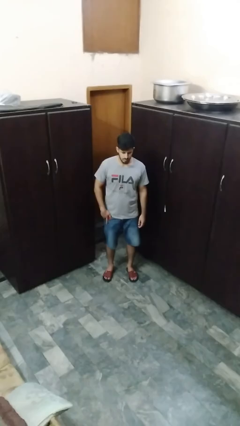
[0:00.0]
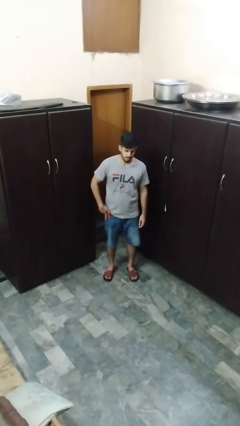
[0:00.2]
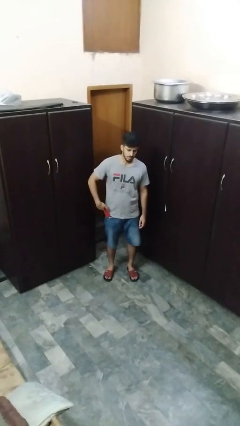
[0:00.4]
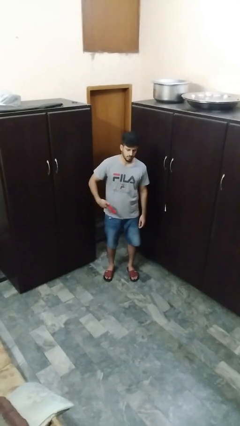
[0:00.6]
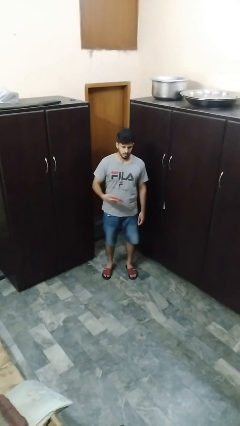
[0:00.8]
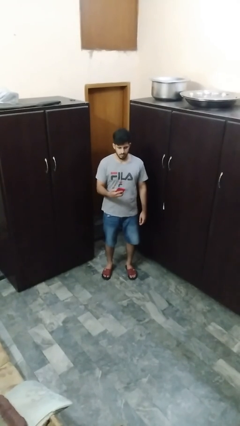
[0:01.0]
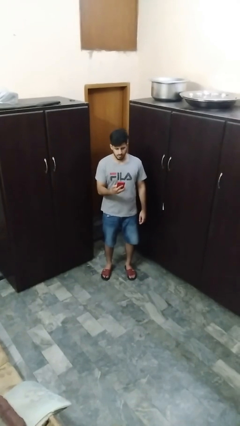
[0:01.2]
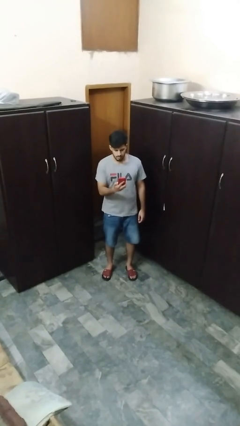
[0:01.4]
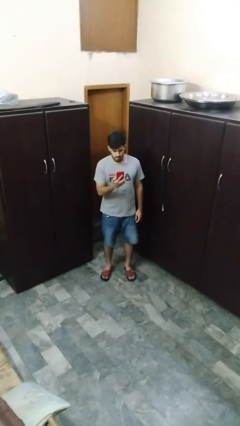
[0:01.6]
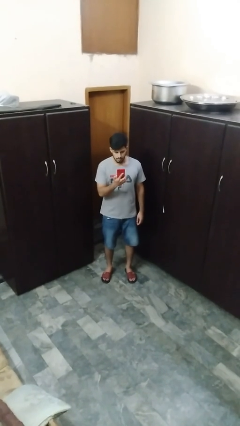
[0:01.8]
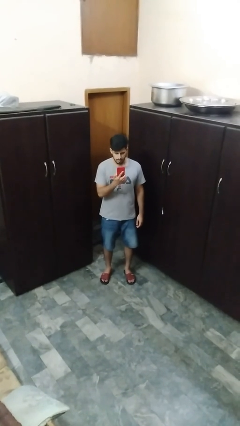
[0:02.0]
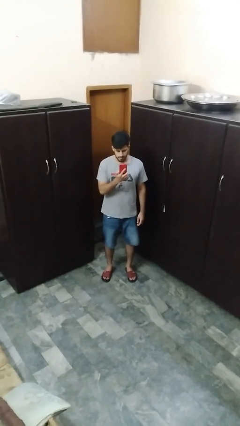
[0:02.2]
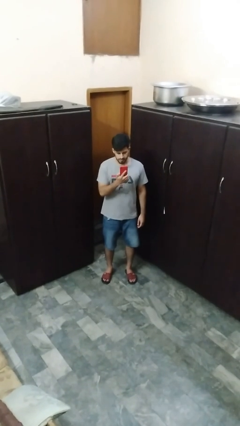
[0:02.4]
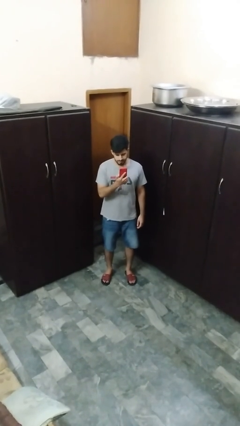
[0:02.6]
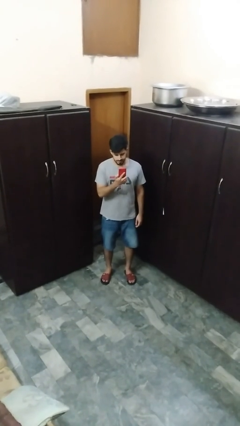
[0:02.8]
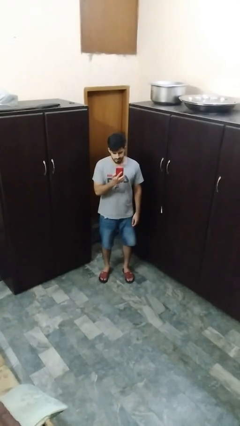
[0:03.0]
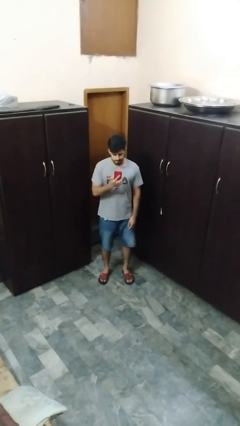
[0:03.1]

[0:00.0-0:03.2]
person takes phone from pocket

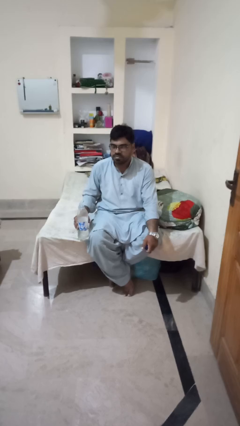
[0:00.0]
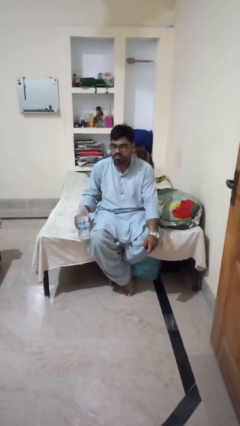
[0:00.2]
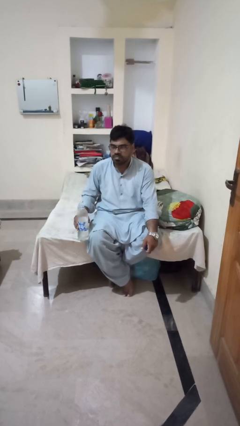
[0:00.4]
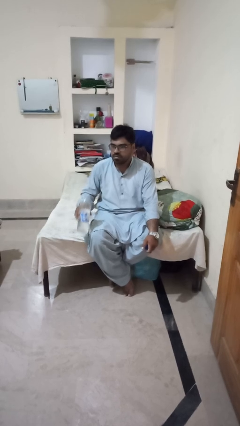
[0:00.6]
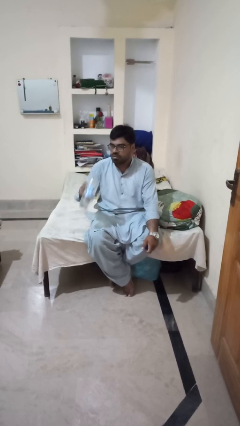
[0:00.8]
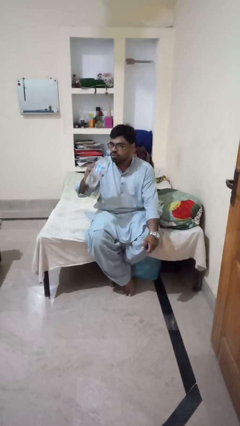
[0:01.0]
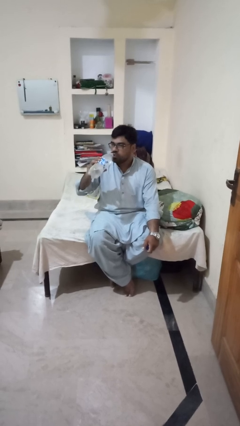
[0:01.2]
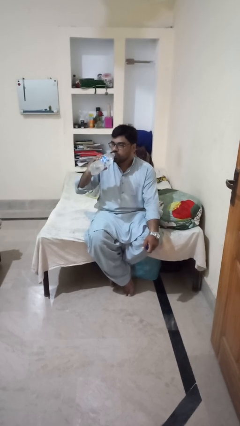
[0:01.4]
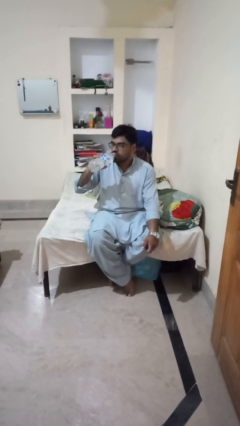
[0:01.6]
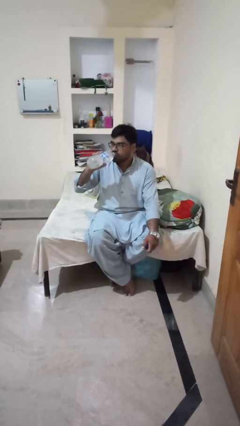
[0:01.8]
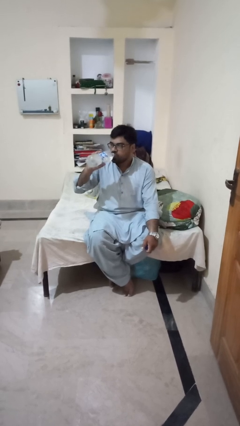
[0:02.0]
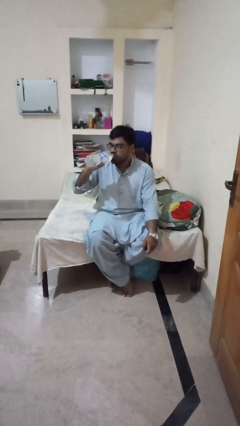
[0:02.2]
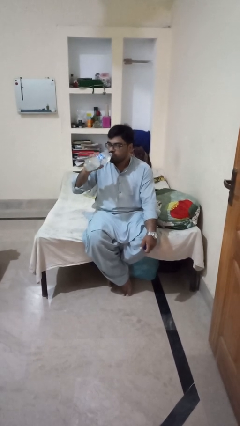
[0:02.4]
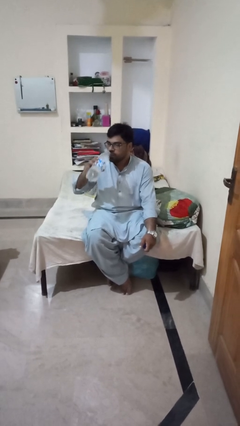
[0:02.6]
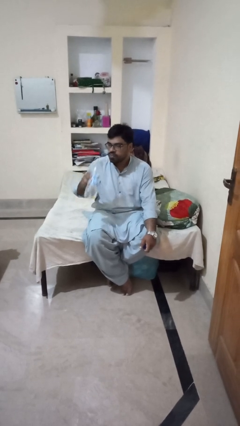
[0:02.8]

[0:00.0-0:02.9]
person drinks from bottle

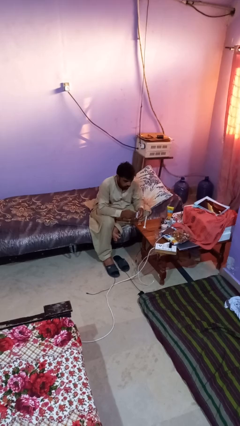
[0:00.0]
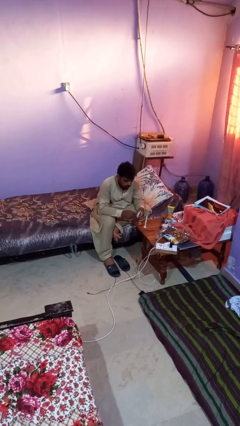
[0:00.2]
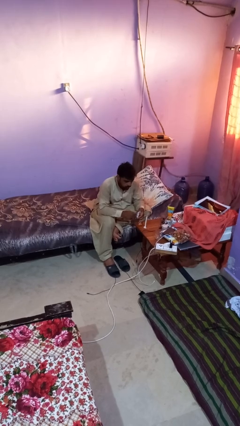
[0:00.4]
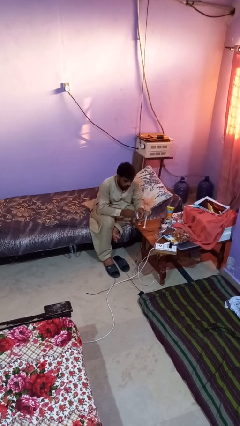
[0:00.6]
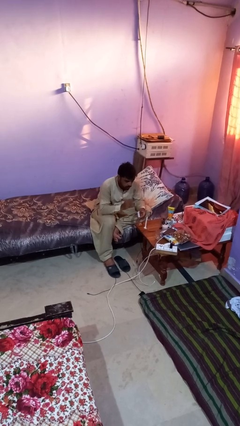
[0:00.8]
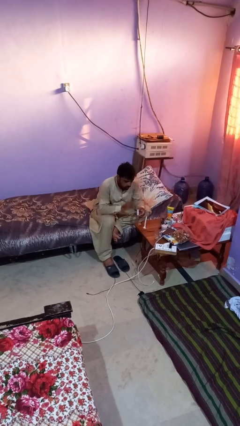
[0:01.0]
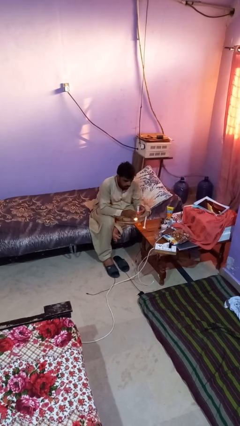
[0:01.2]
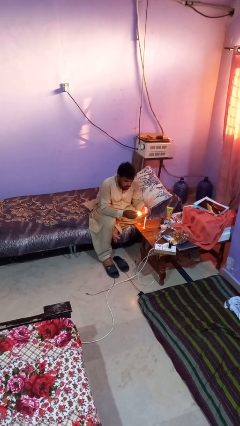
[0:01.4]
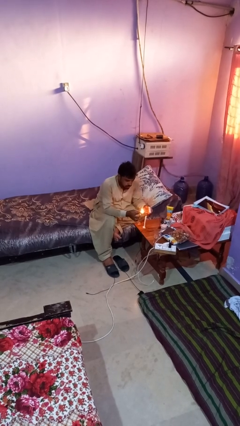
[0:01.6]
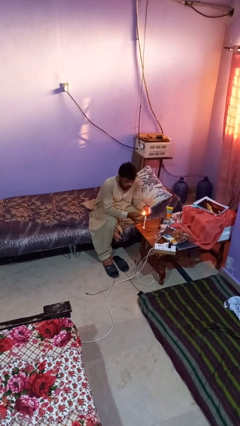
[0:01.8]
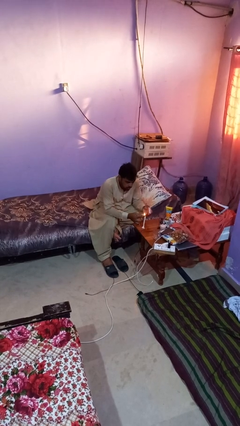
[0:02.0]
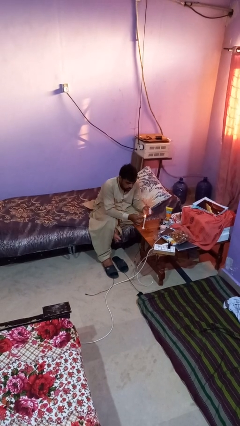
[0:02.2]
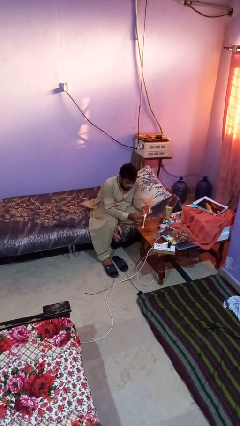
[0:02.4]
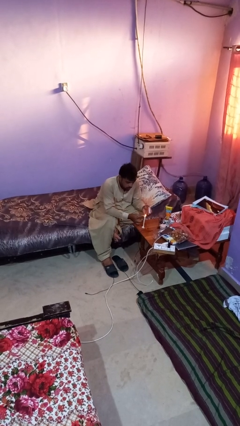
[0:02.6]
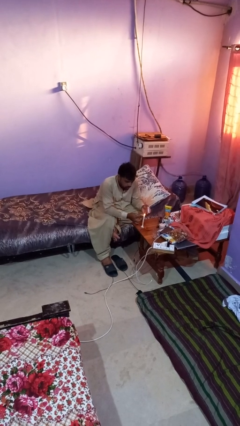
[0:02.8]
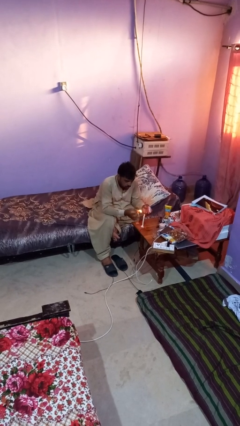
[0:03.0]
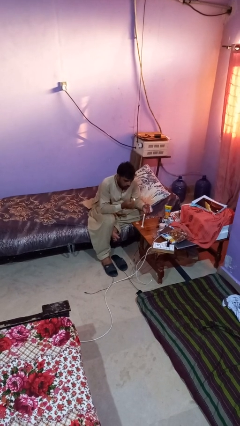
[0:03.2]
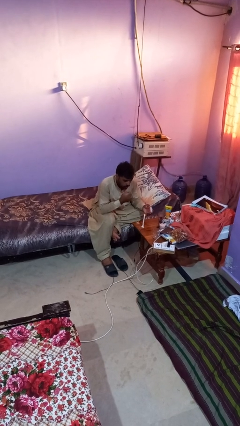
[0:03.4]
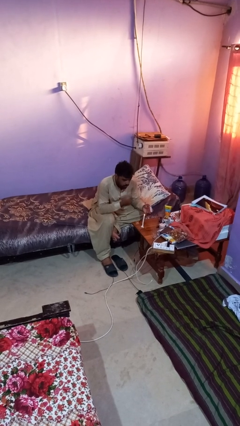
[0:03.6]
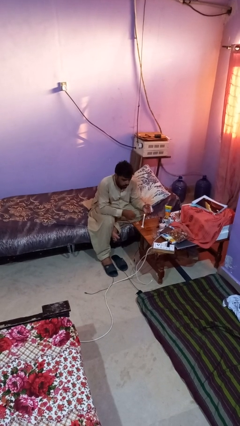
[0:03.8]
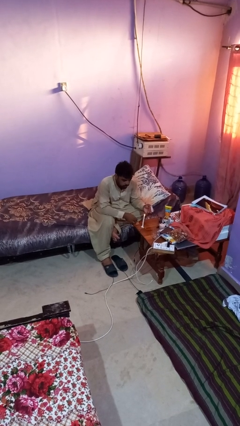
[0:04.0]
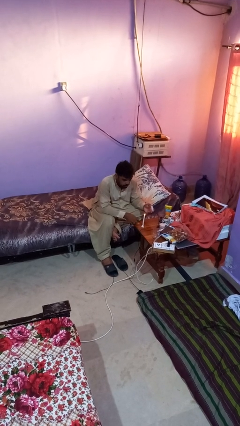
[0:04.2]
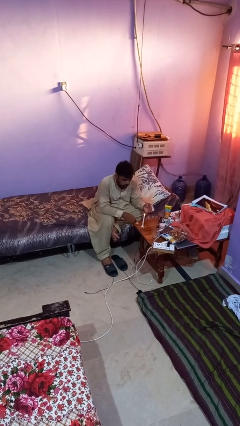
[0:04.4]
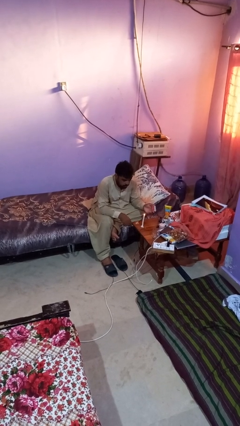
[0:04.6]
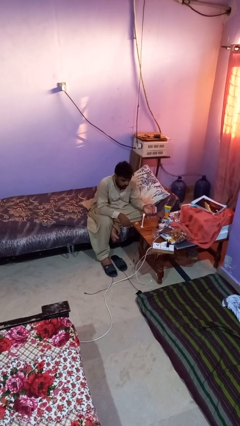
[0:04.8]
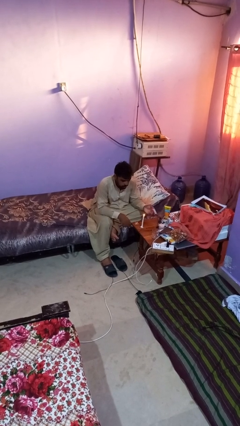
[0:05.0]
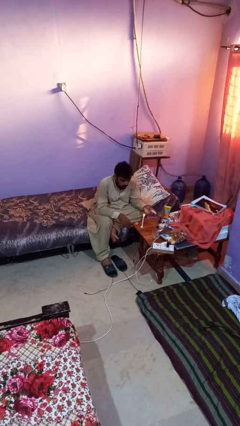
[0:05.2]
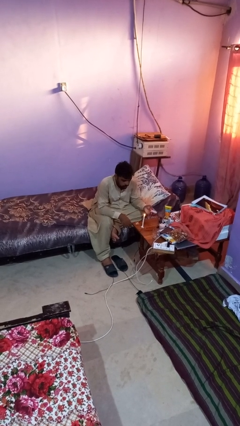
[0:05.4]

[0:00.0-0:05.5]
person lights candle

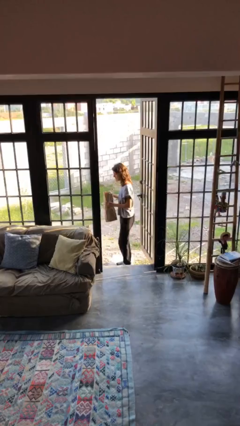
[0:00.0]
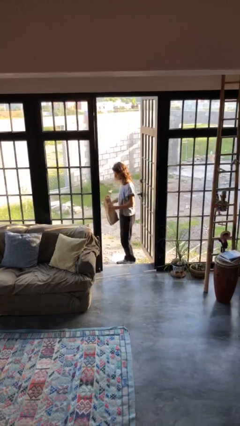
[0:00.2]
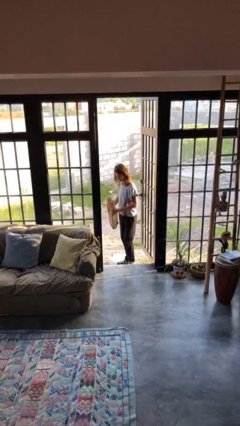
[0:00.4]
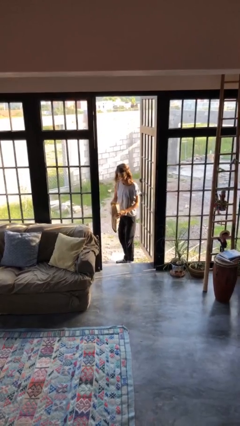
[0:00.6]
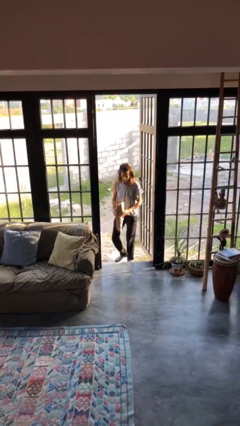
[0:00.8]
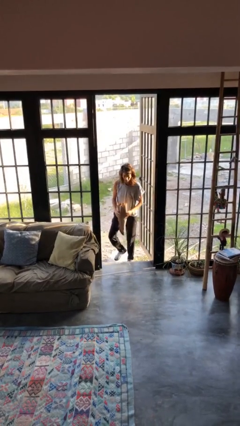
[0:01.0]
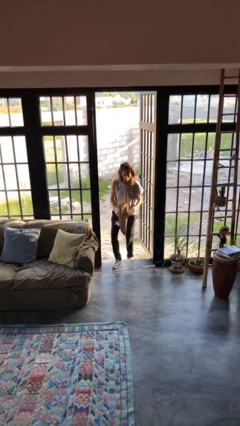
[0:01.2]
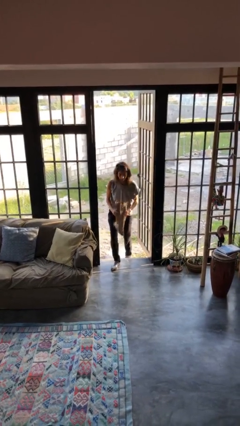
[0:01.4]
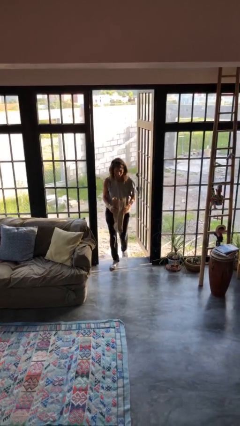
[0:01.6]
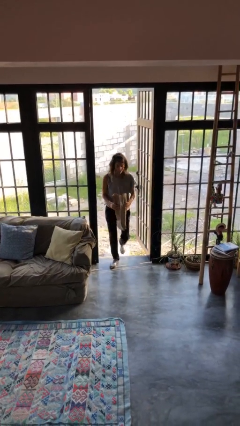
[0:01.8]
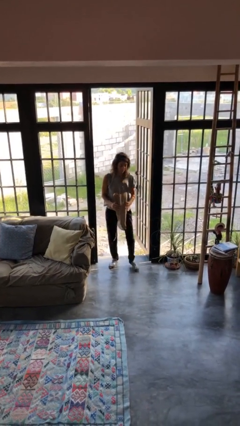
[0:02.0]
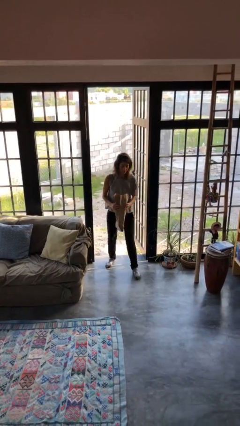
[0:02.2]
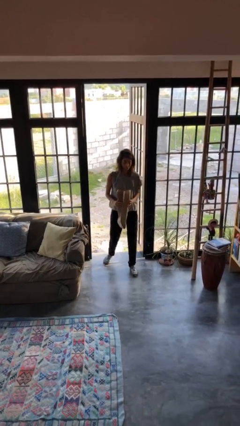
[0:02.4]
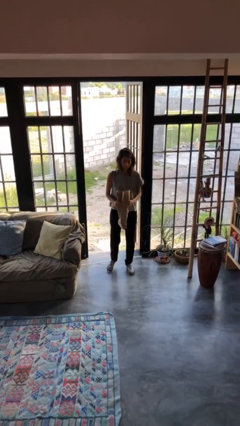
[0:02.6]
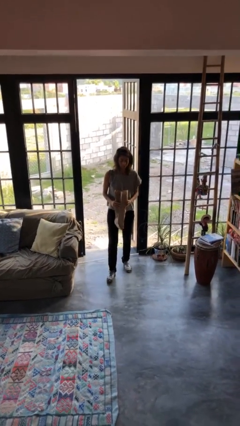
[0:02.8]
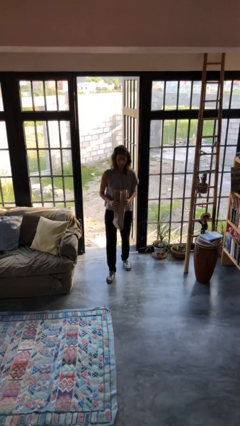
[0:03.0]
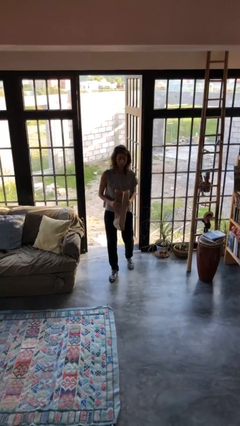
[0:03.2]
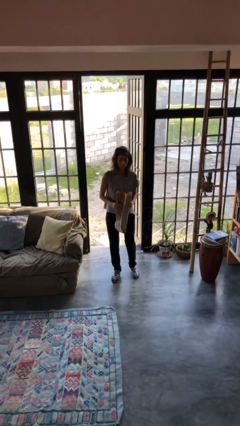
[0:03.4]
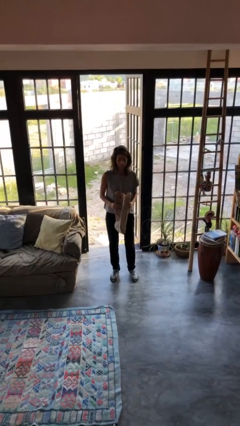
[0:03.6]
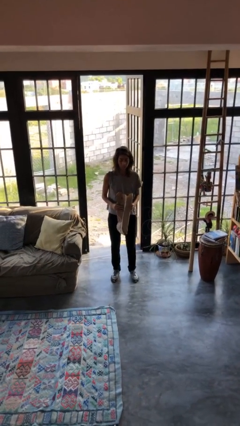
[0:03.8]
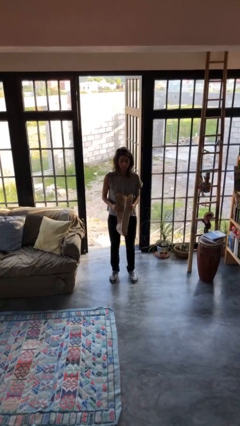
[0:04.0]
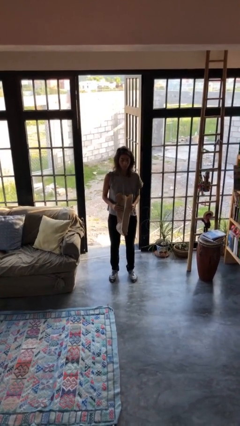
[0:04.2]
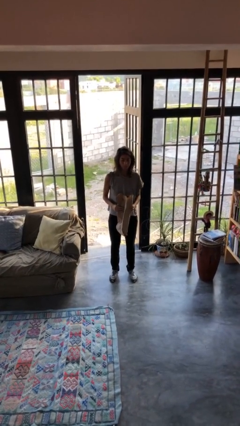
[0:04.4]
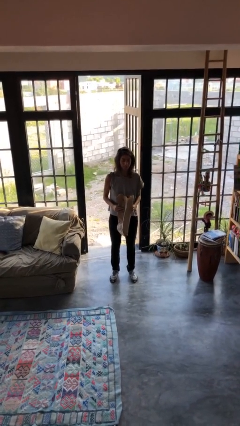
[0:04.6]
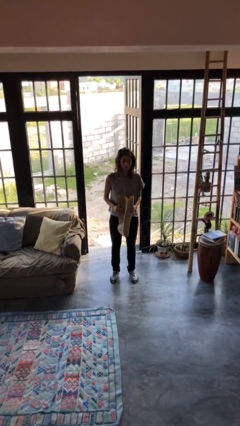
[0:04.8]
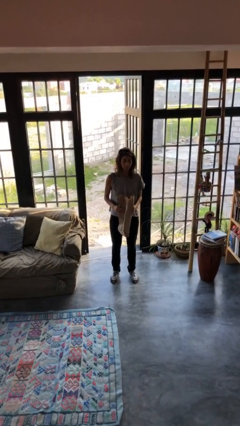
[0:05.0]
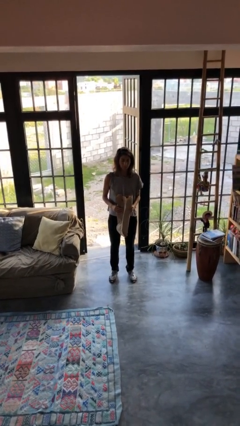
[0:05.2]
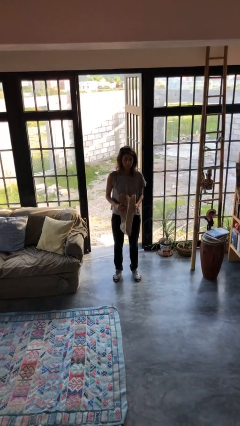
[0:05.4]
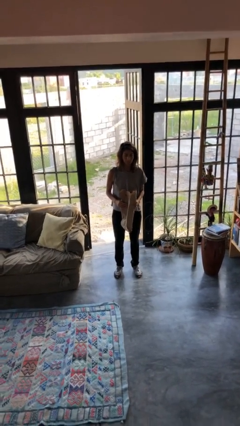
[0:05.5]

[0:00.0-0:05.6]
person carries groceries

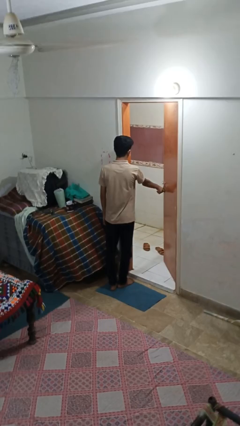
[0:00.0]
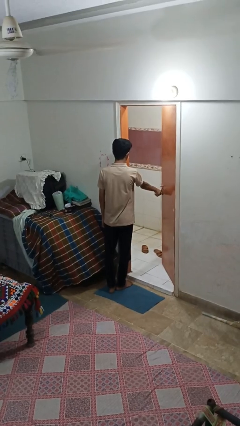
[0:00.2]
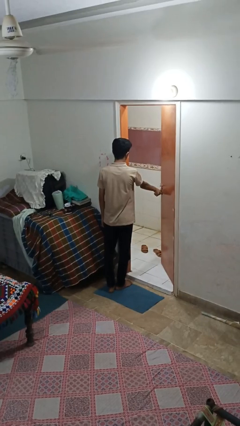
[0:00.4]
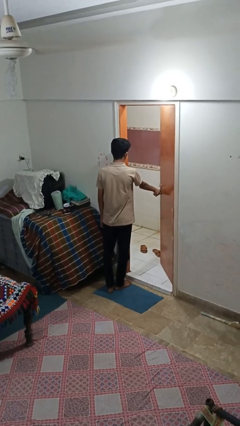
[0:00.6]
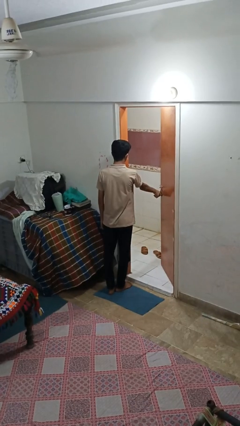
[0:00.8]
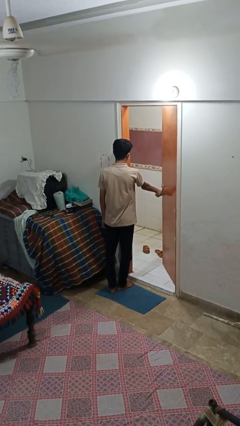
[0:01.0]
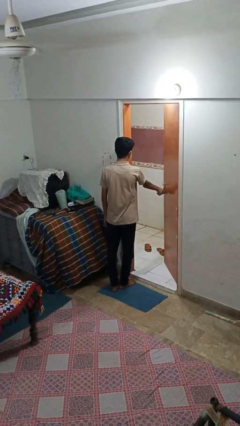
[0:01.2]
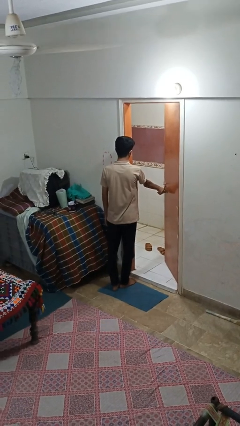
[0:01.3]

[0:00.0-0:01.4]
person opens facility door
